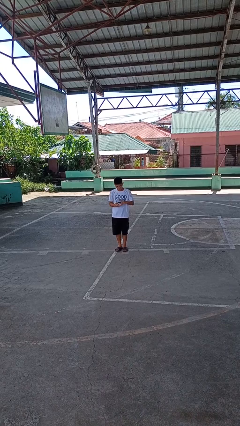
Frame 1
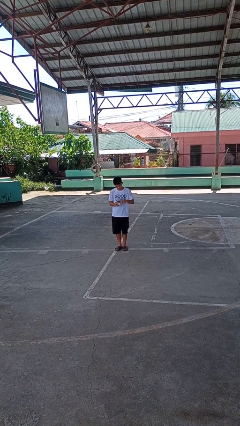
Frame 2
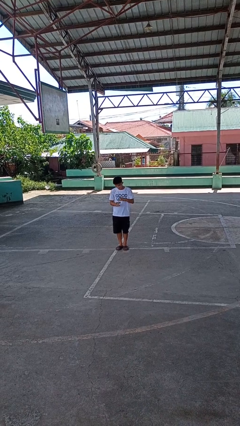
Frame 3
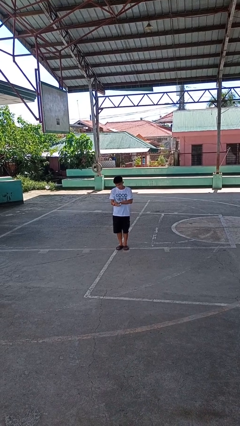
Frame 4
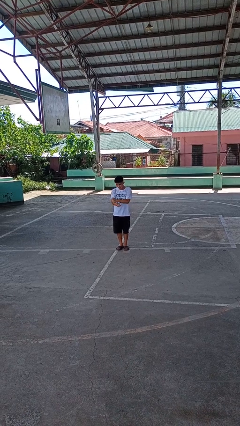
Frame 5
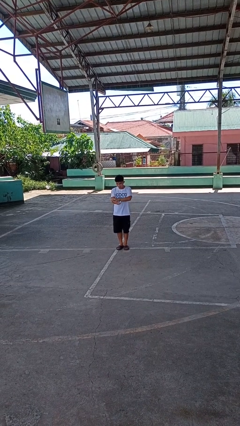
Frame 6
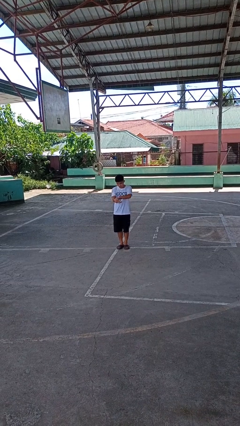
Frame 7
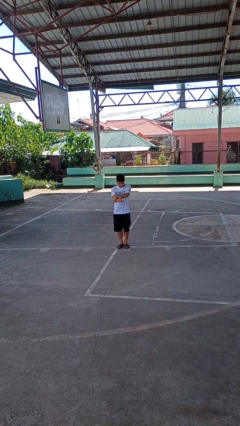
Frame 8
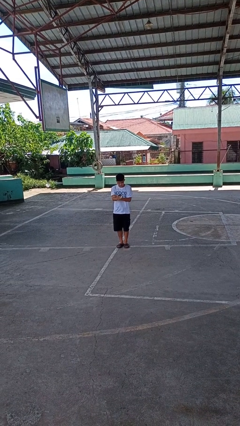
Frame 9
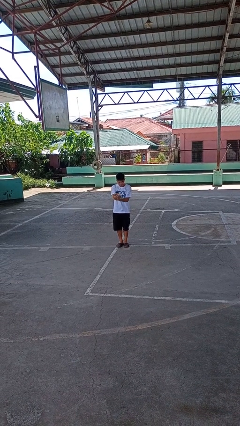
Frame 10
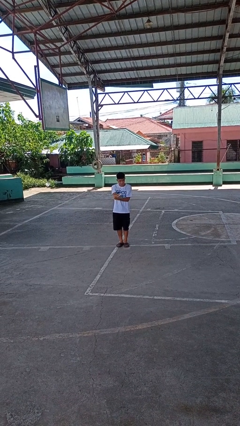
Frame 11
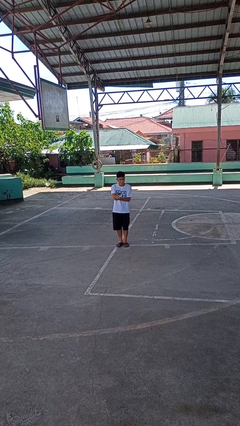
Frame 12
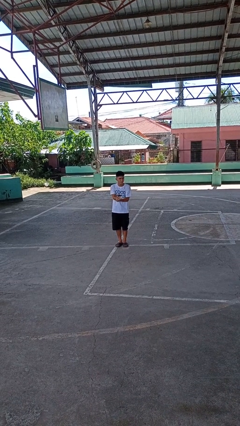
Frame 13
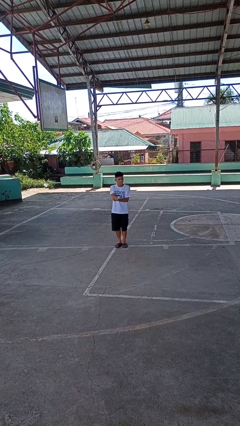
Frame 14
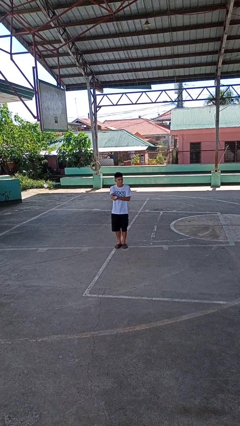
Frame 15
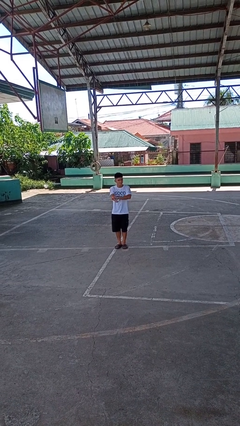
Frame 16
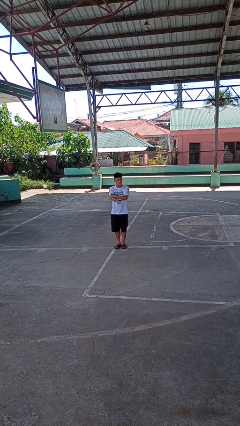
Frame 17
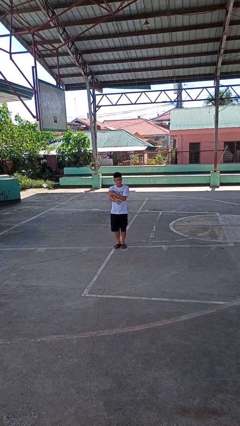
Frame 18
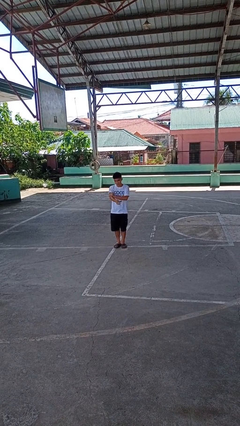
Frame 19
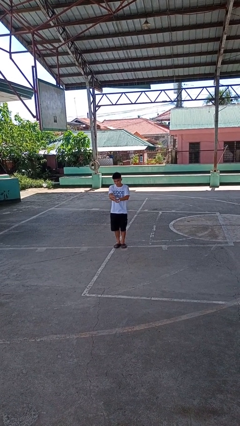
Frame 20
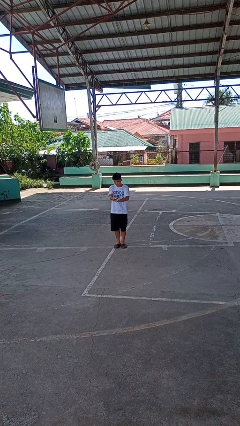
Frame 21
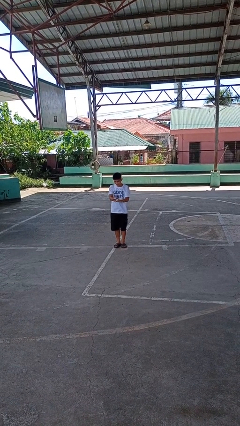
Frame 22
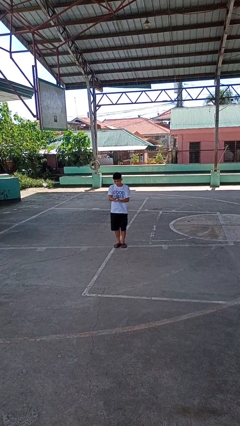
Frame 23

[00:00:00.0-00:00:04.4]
person applies sunscreen

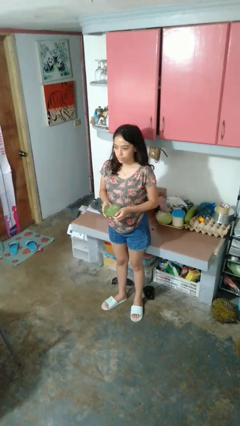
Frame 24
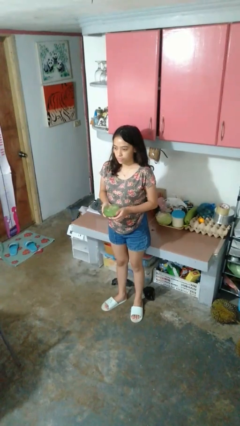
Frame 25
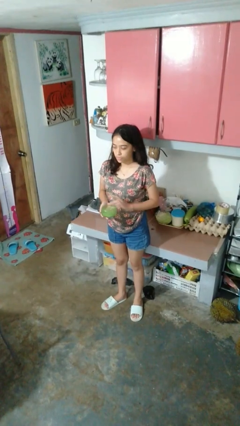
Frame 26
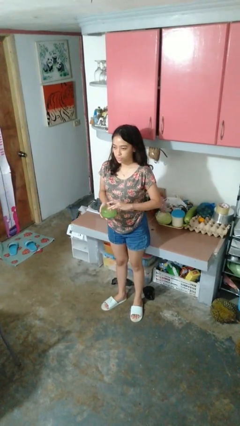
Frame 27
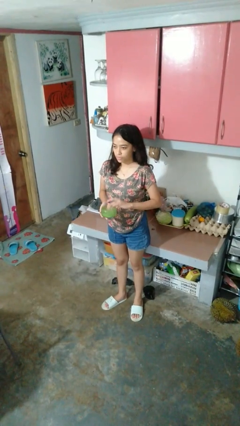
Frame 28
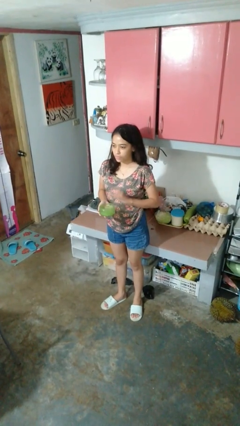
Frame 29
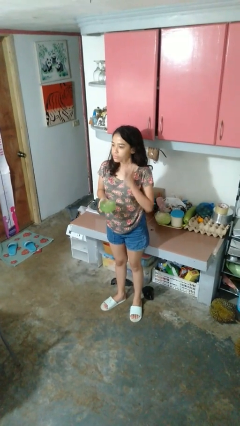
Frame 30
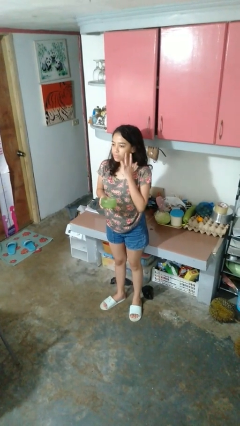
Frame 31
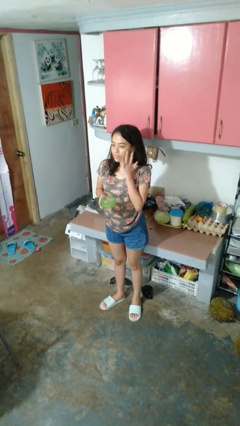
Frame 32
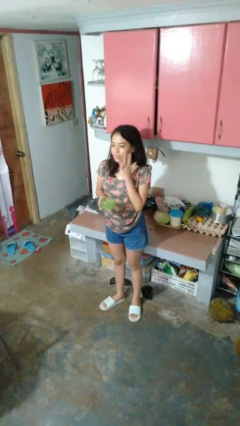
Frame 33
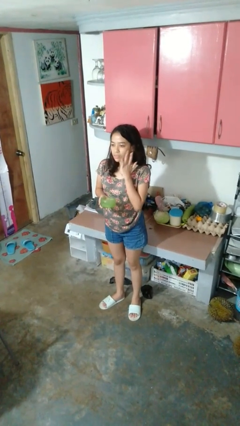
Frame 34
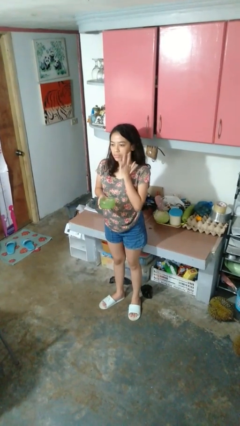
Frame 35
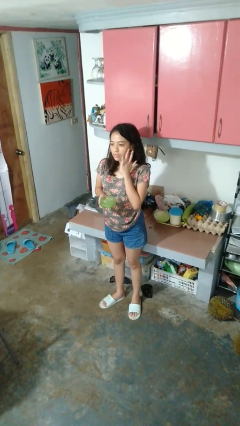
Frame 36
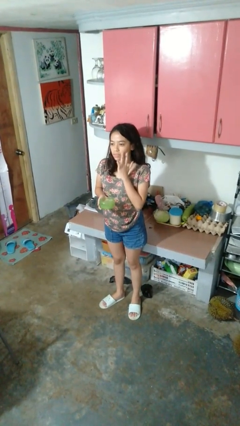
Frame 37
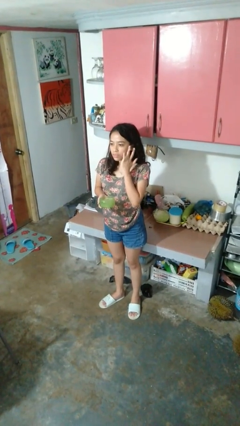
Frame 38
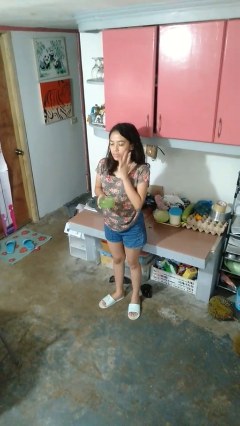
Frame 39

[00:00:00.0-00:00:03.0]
person applies facial moisturizer

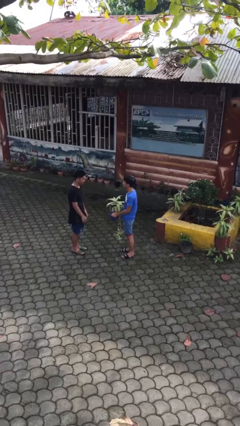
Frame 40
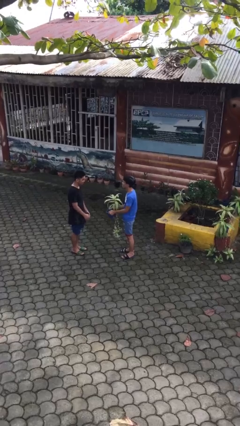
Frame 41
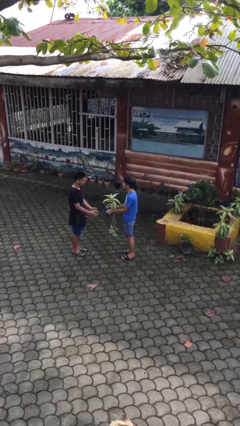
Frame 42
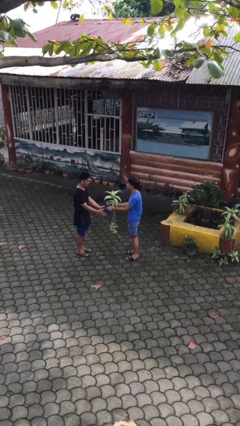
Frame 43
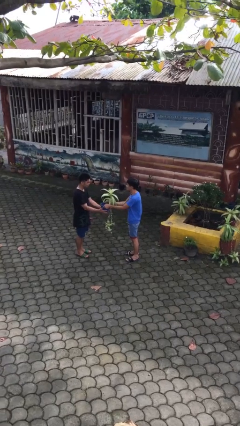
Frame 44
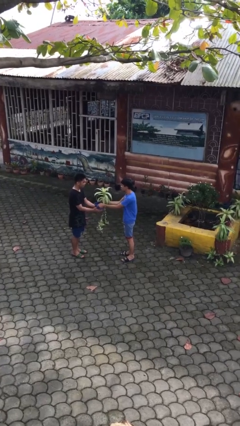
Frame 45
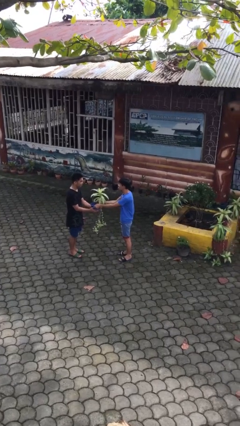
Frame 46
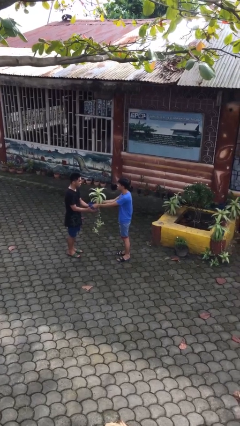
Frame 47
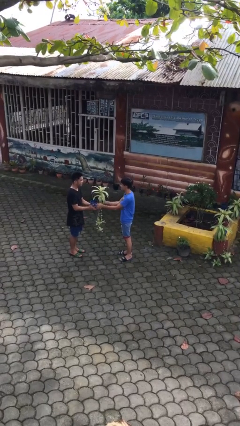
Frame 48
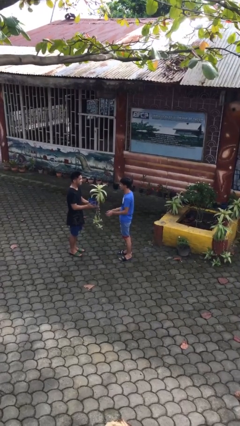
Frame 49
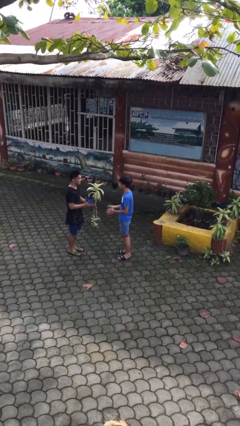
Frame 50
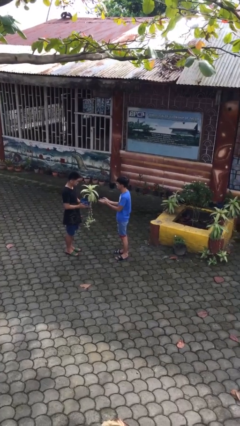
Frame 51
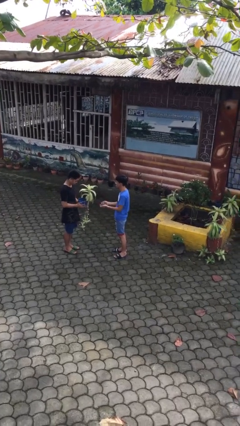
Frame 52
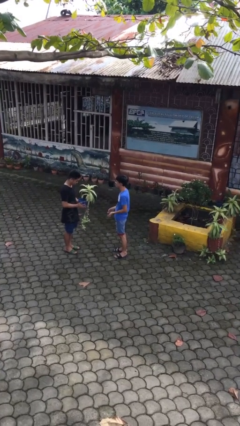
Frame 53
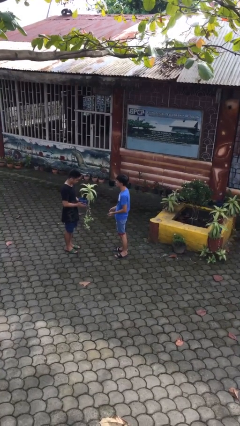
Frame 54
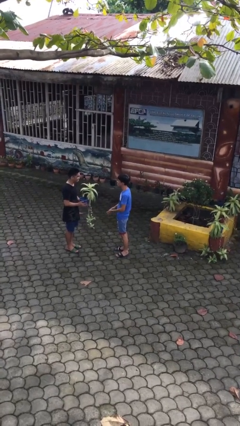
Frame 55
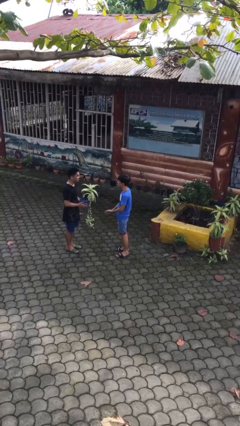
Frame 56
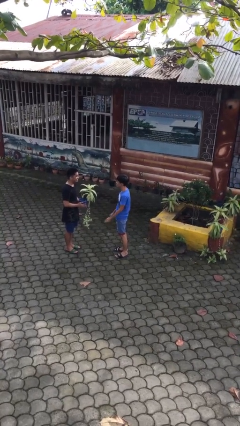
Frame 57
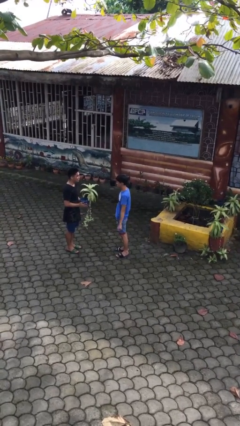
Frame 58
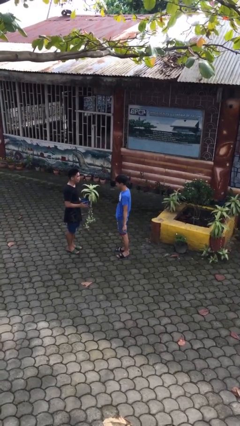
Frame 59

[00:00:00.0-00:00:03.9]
person transfers object to person

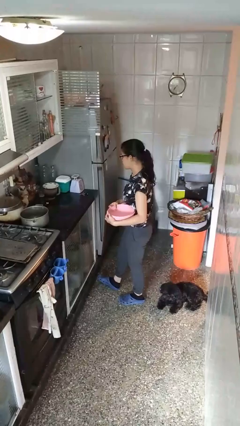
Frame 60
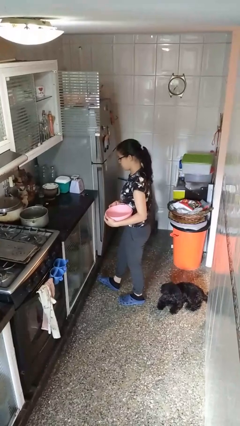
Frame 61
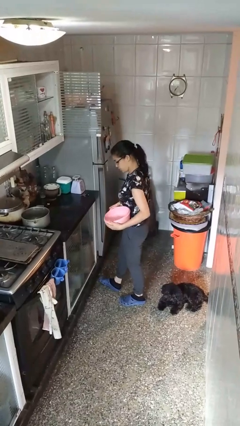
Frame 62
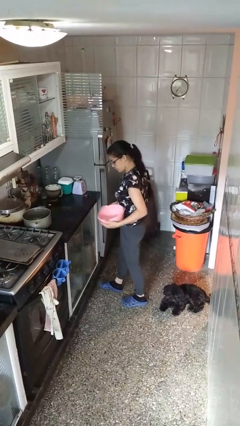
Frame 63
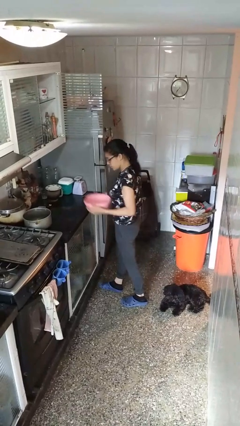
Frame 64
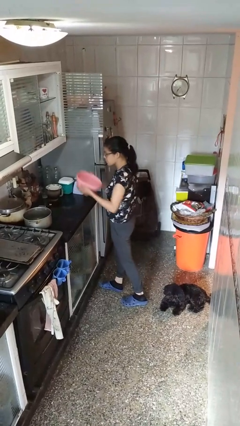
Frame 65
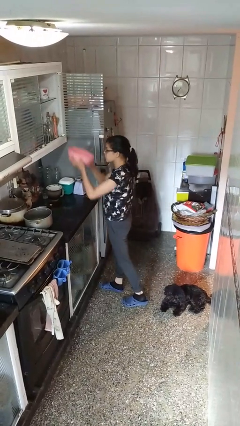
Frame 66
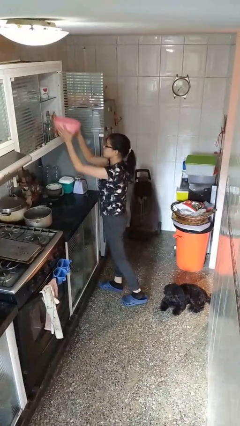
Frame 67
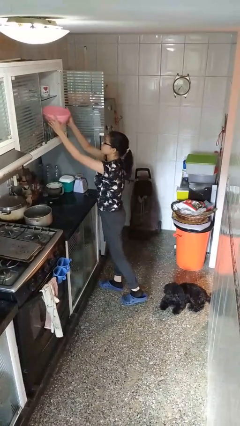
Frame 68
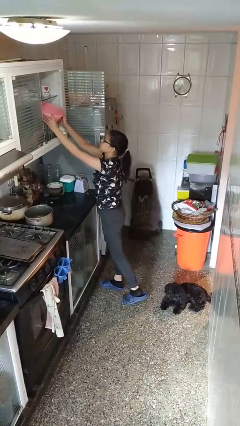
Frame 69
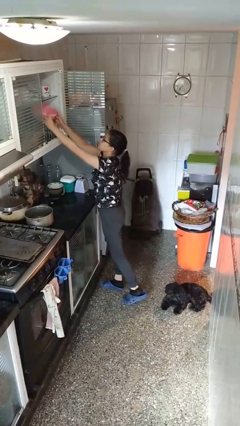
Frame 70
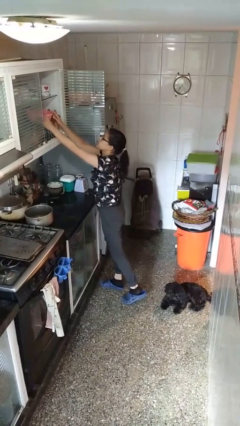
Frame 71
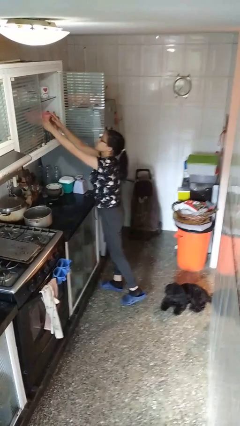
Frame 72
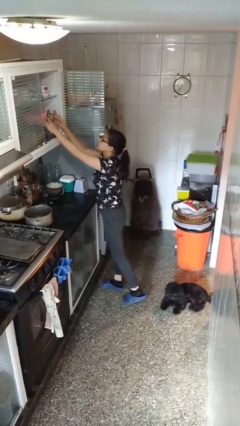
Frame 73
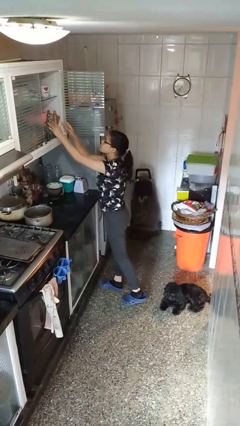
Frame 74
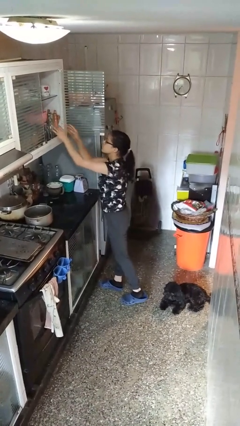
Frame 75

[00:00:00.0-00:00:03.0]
person puts down object into cabinet

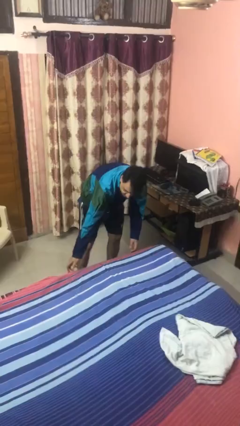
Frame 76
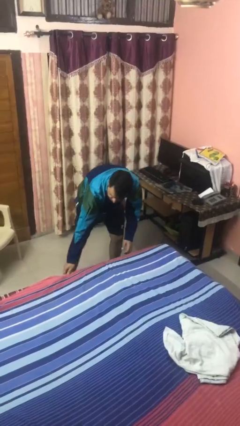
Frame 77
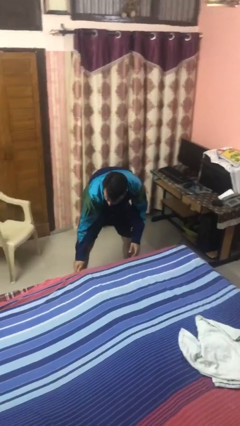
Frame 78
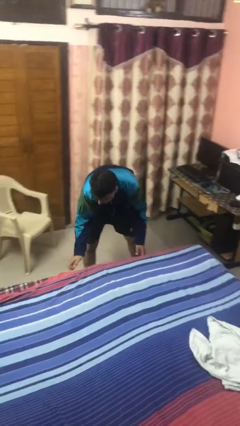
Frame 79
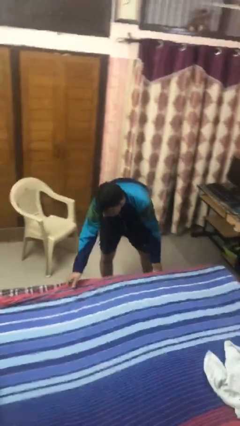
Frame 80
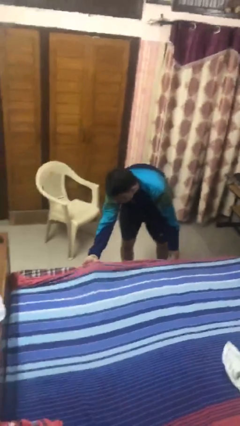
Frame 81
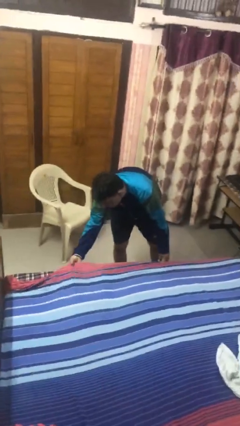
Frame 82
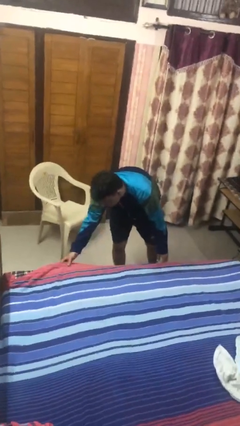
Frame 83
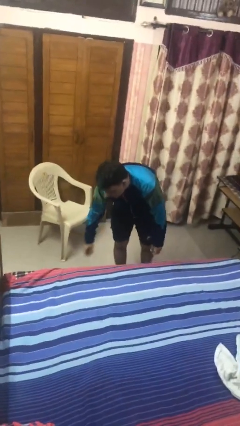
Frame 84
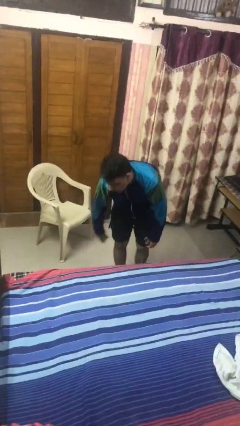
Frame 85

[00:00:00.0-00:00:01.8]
person makes bed

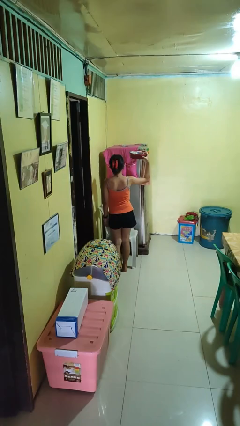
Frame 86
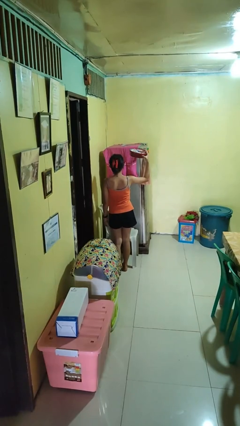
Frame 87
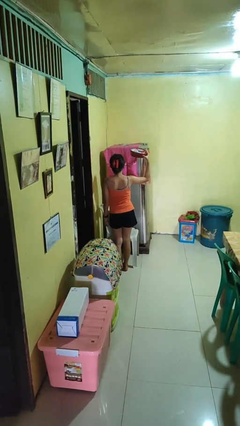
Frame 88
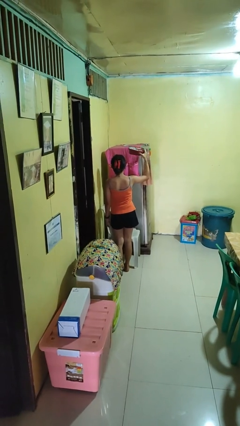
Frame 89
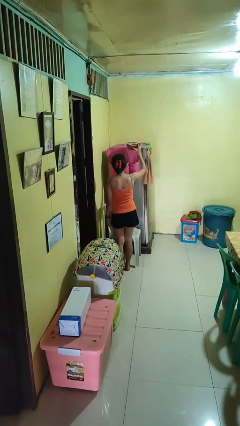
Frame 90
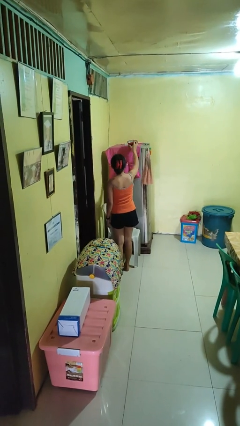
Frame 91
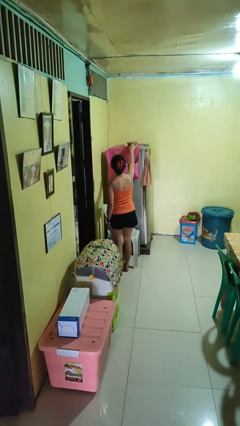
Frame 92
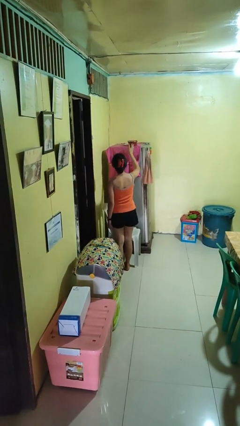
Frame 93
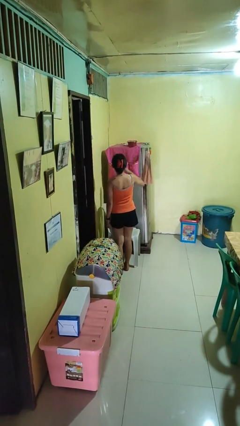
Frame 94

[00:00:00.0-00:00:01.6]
person puts down object on shelf
